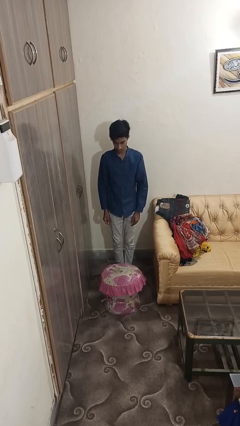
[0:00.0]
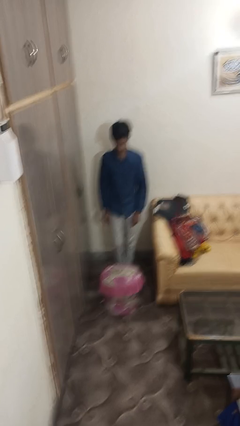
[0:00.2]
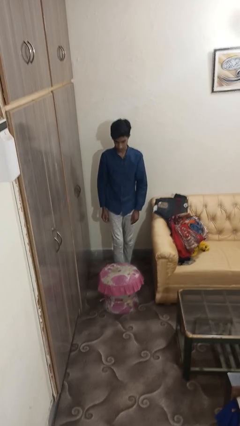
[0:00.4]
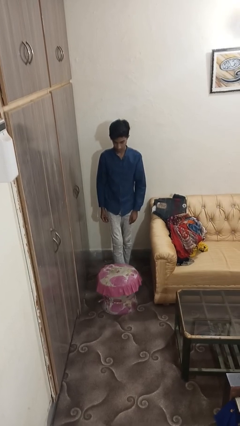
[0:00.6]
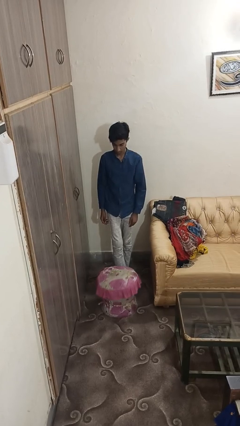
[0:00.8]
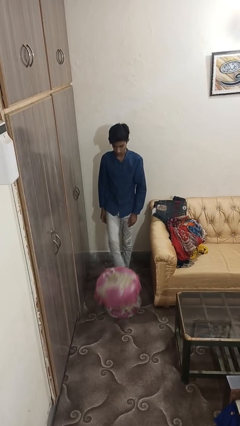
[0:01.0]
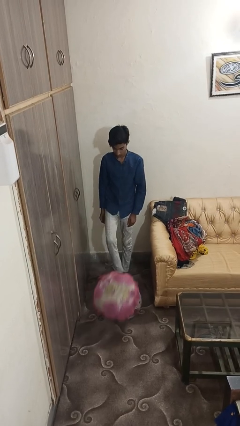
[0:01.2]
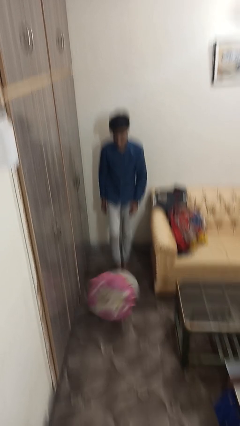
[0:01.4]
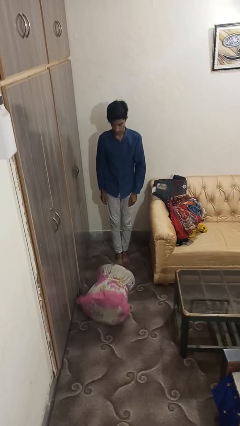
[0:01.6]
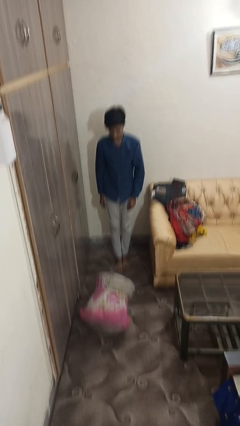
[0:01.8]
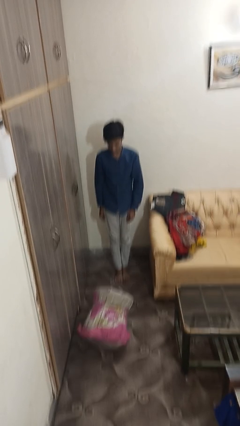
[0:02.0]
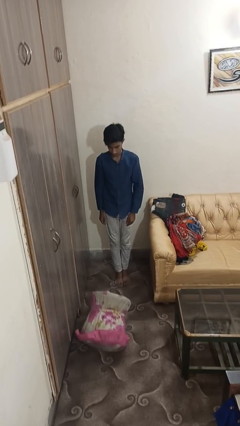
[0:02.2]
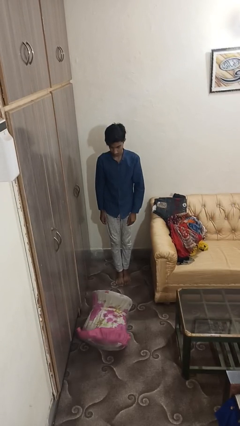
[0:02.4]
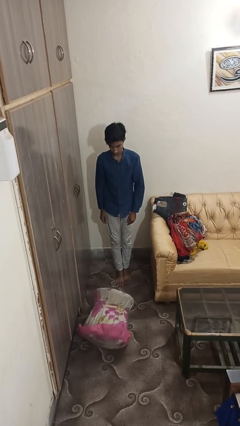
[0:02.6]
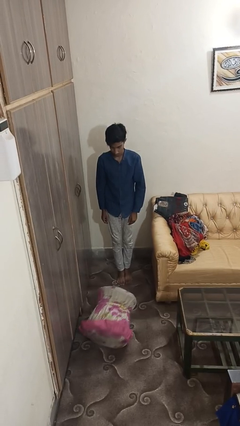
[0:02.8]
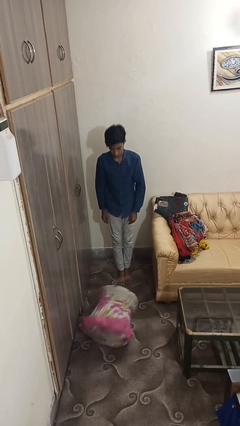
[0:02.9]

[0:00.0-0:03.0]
person knocks over furniture

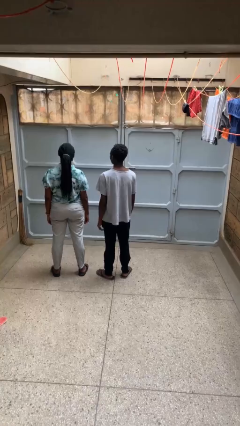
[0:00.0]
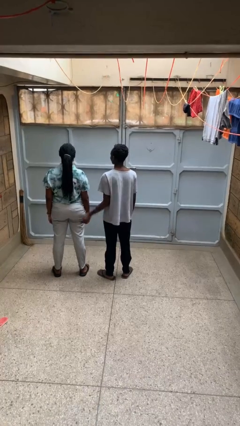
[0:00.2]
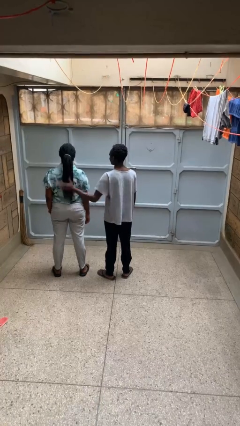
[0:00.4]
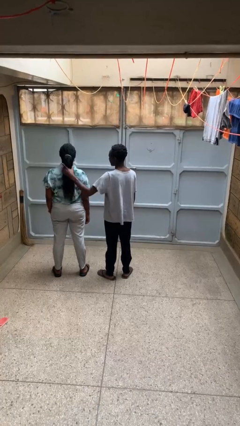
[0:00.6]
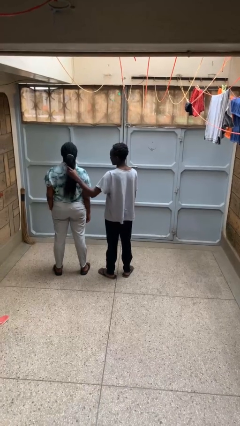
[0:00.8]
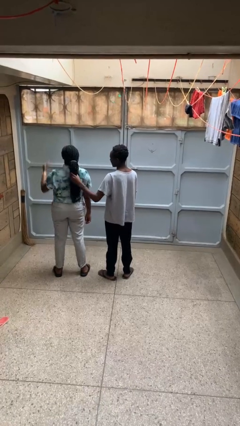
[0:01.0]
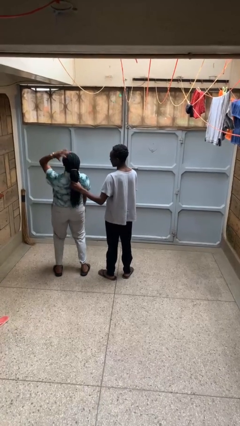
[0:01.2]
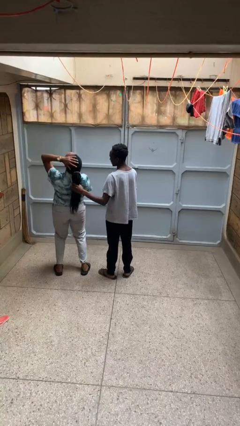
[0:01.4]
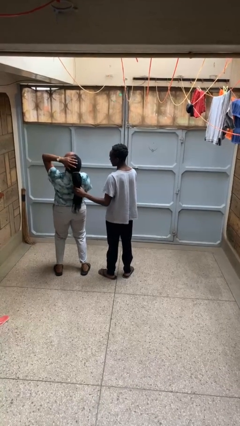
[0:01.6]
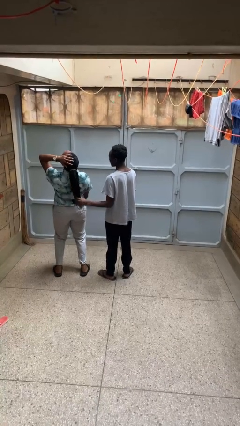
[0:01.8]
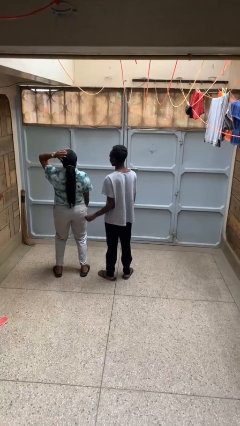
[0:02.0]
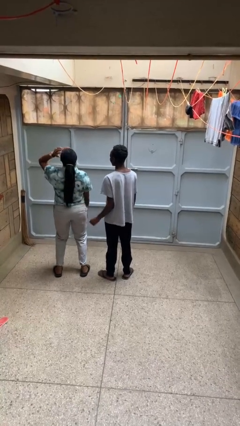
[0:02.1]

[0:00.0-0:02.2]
person grabs person by hair

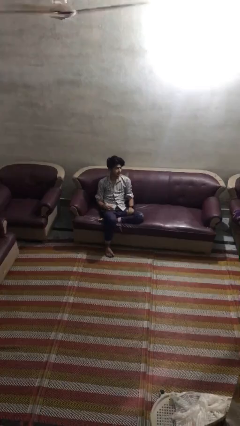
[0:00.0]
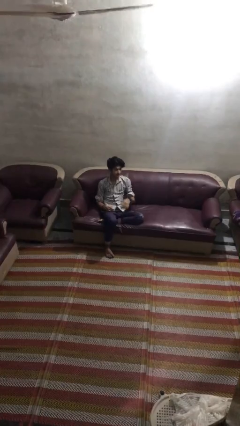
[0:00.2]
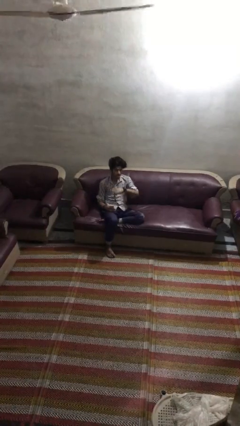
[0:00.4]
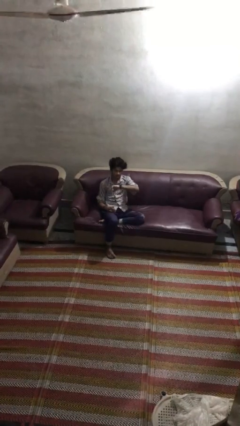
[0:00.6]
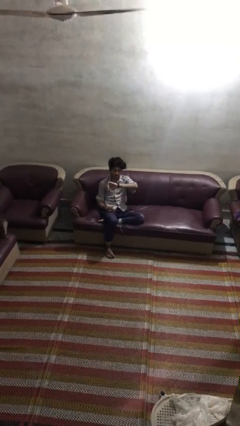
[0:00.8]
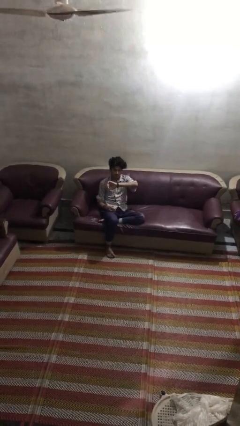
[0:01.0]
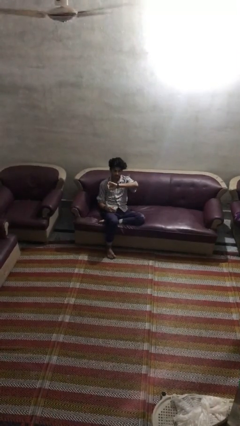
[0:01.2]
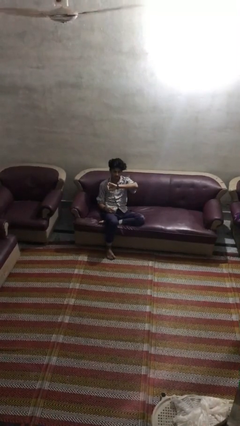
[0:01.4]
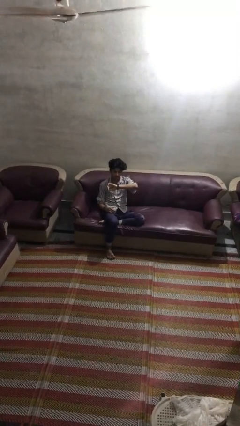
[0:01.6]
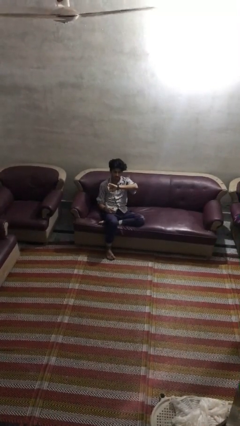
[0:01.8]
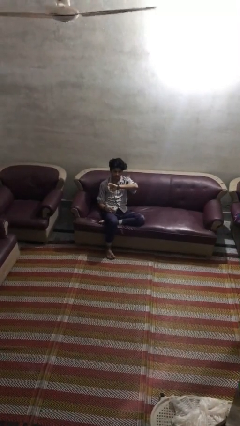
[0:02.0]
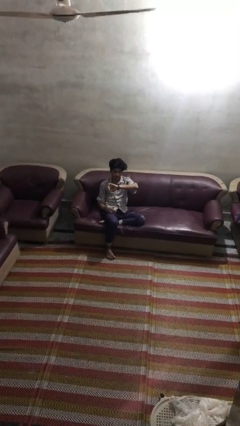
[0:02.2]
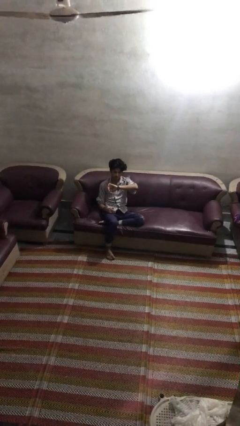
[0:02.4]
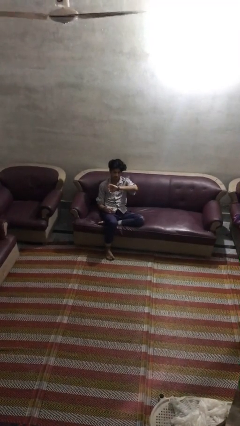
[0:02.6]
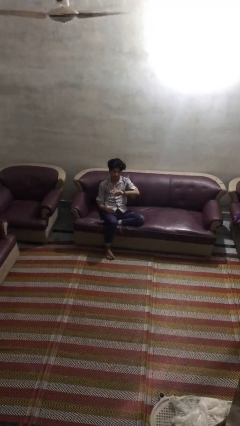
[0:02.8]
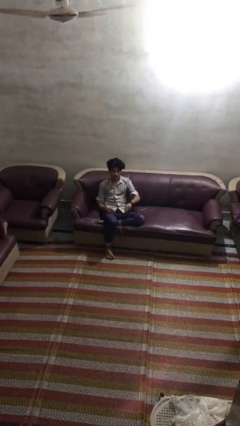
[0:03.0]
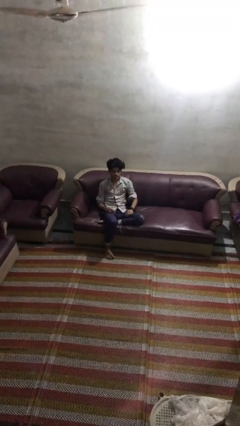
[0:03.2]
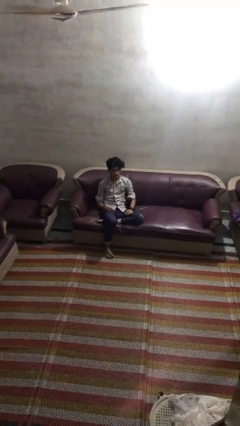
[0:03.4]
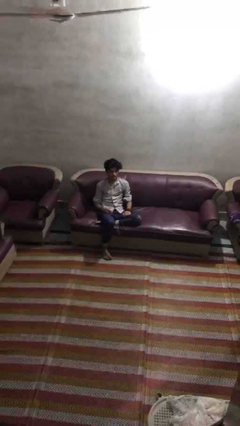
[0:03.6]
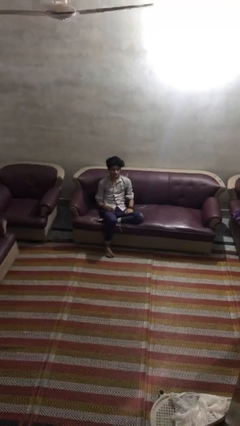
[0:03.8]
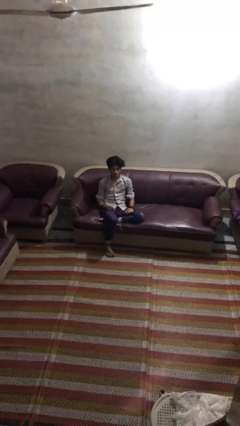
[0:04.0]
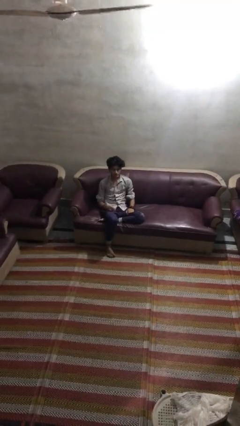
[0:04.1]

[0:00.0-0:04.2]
person looks at wristwatch

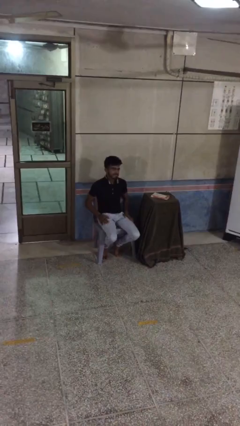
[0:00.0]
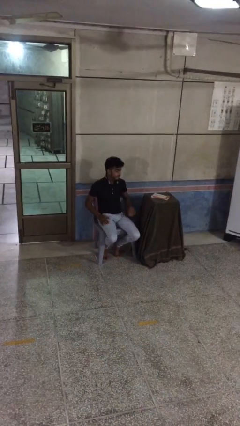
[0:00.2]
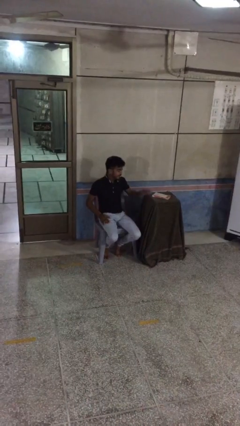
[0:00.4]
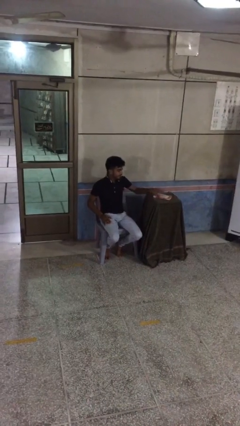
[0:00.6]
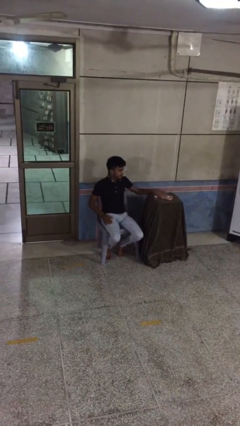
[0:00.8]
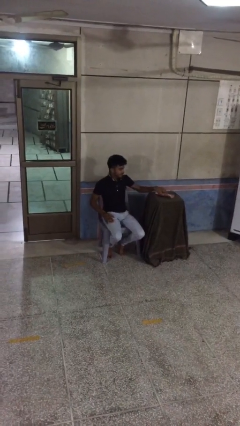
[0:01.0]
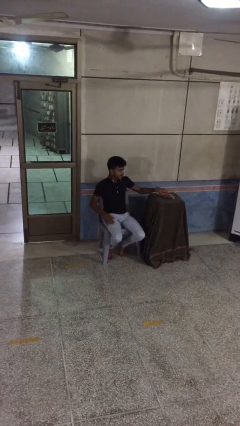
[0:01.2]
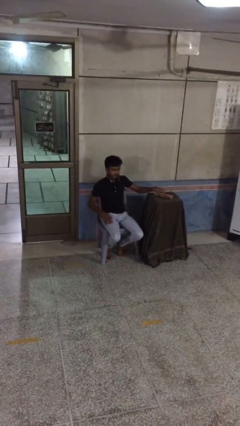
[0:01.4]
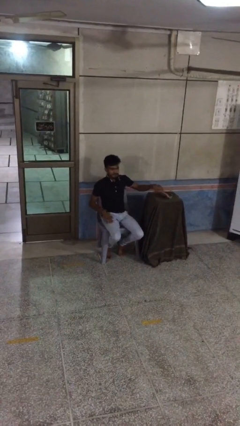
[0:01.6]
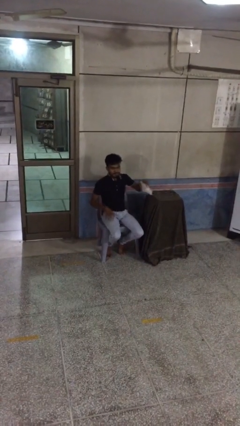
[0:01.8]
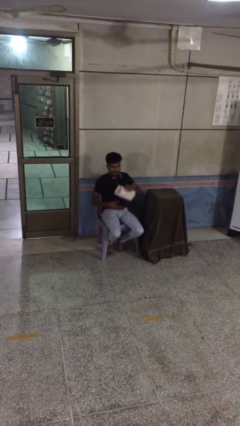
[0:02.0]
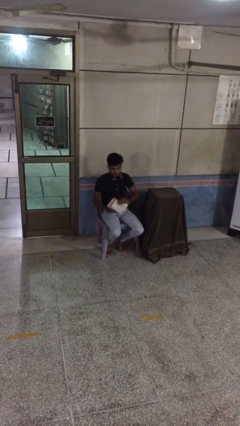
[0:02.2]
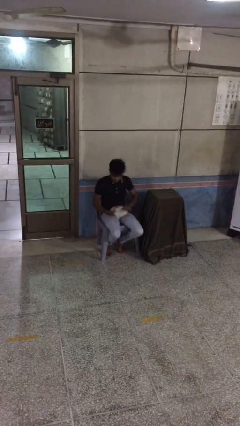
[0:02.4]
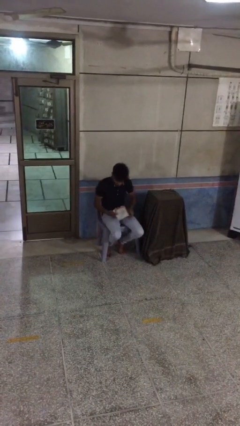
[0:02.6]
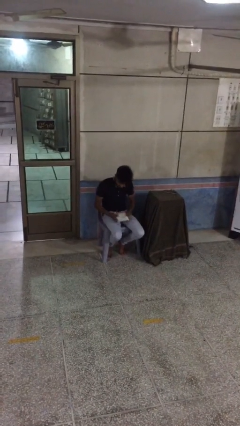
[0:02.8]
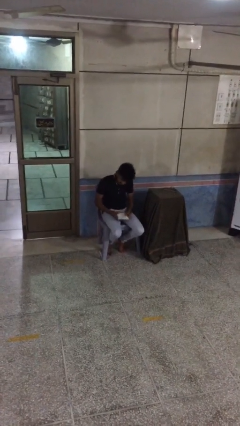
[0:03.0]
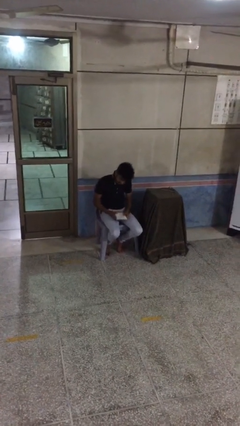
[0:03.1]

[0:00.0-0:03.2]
person picks up object from table

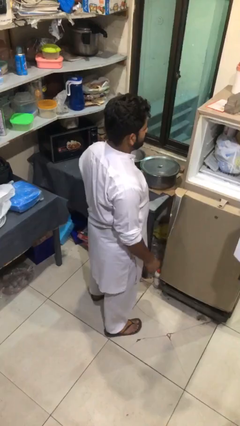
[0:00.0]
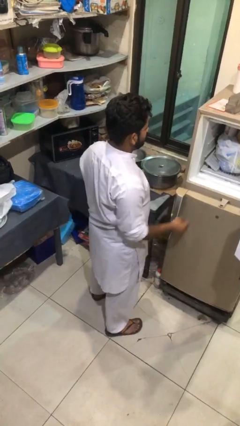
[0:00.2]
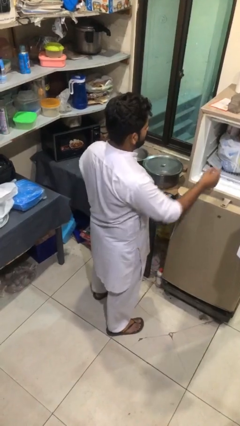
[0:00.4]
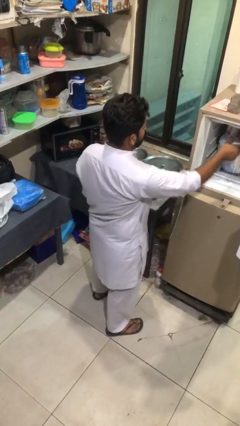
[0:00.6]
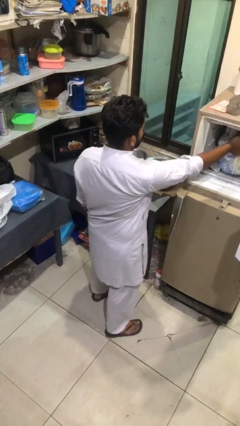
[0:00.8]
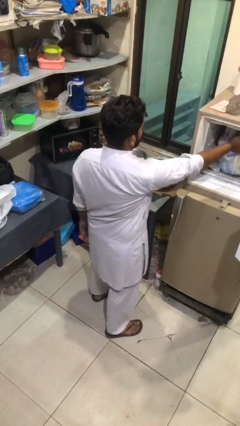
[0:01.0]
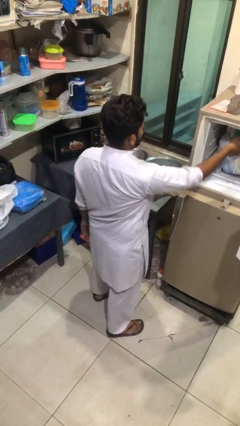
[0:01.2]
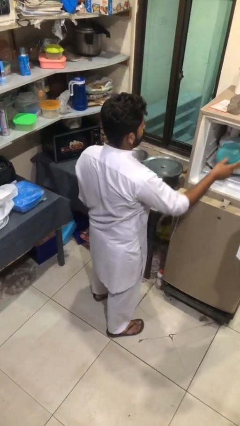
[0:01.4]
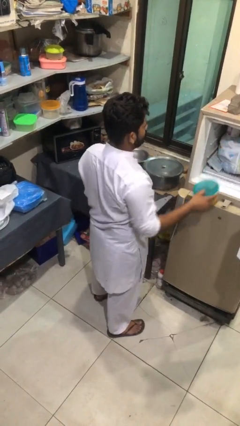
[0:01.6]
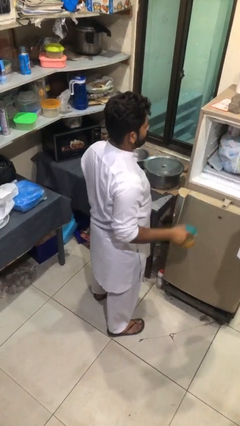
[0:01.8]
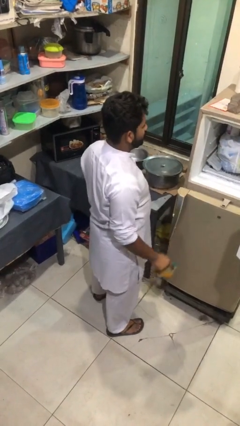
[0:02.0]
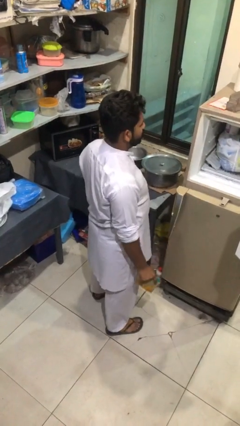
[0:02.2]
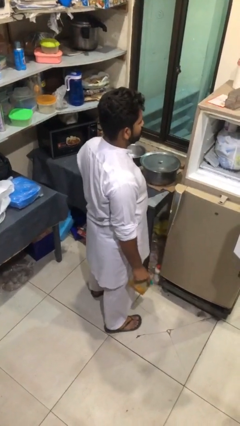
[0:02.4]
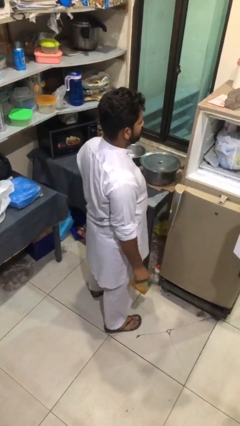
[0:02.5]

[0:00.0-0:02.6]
person takes object from refrigerator

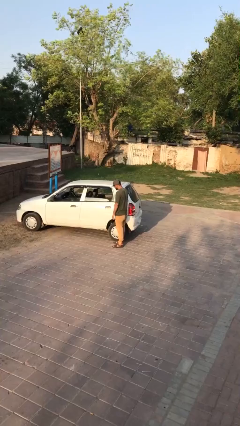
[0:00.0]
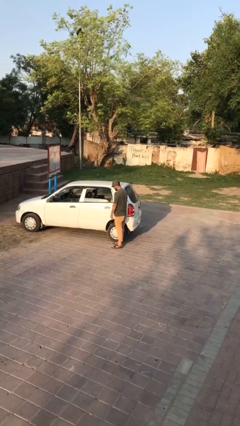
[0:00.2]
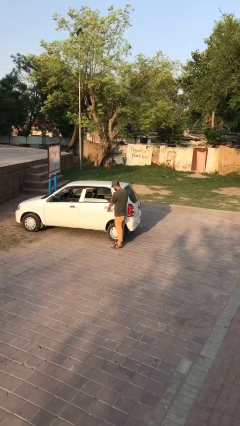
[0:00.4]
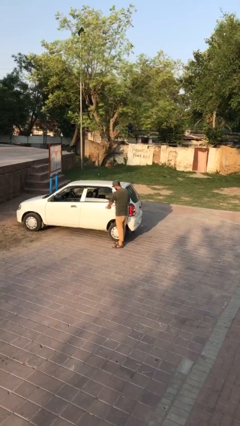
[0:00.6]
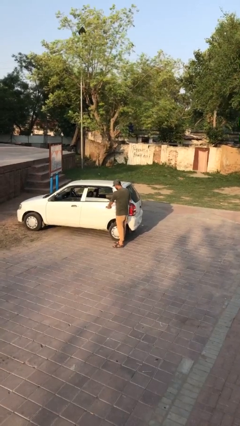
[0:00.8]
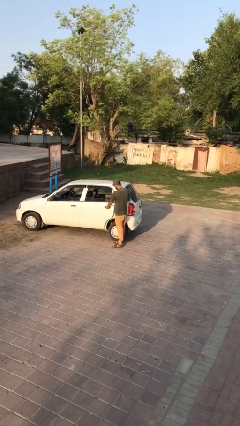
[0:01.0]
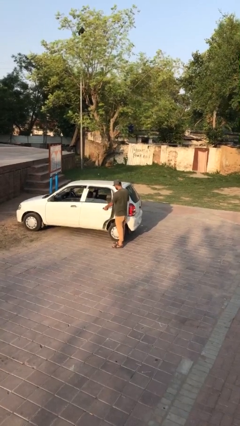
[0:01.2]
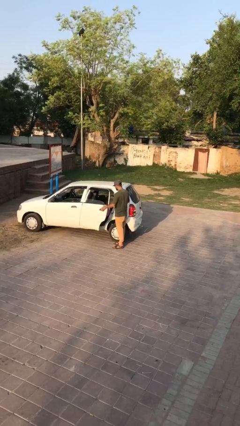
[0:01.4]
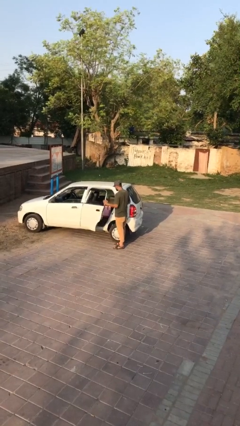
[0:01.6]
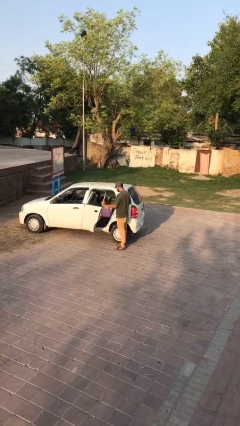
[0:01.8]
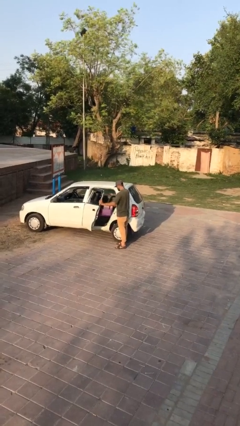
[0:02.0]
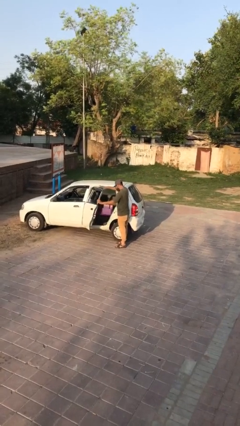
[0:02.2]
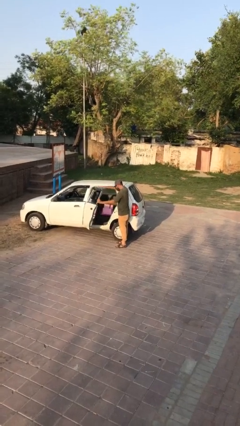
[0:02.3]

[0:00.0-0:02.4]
person opens car door
